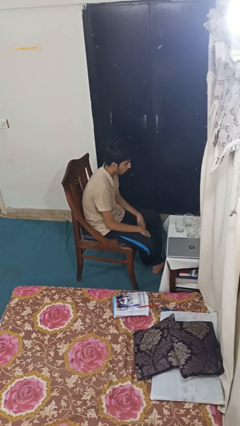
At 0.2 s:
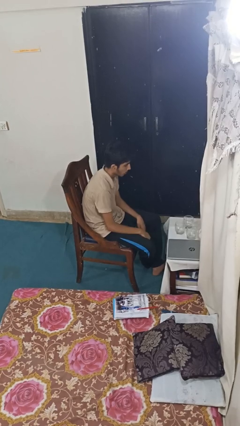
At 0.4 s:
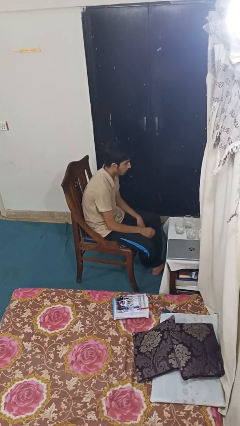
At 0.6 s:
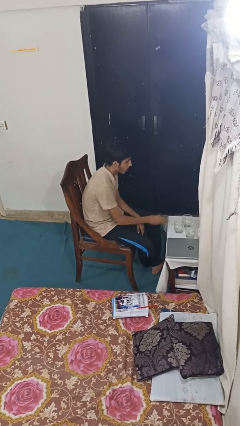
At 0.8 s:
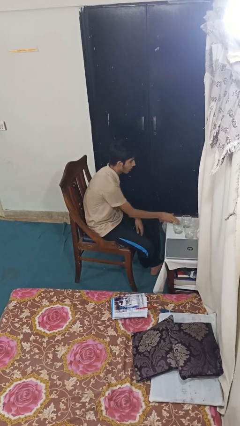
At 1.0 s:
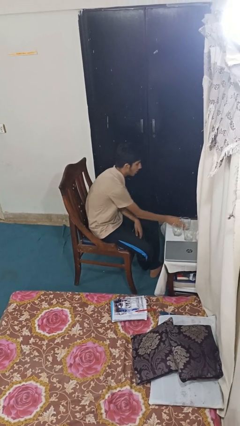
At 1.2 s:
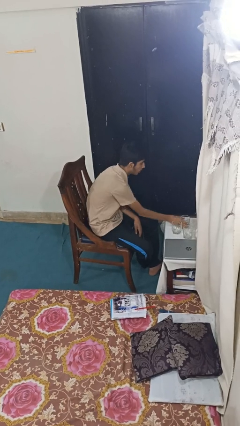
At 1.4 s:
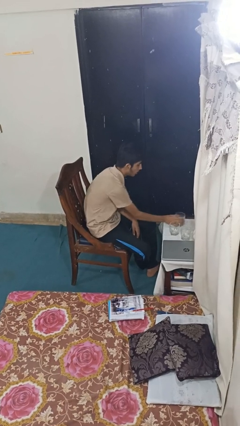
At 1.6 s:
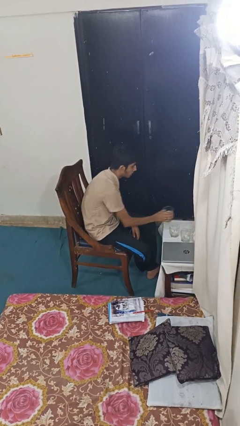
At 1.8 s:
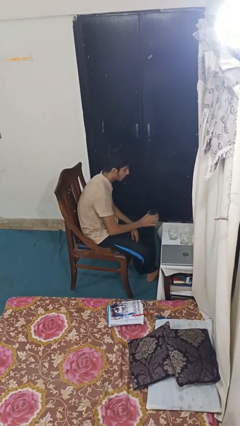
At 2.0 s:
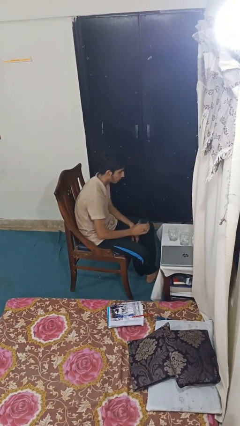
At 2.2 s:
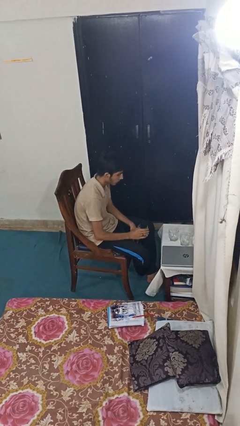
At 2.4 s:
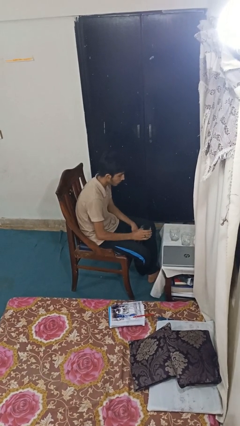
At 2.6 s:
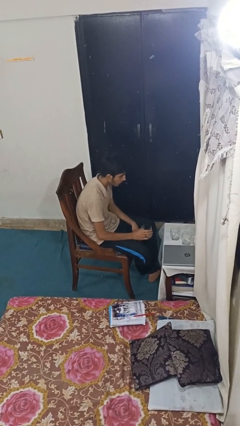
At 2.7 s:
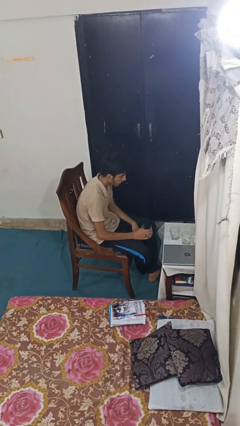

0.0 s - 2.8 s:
person picks up object from table

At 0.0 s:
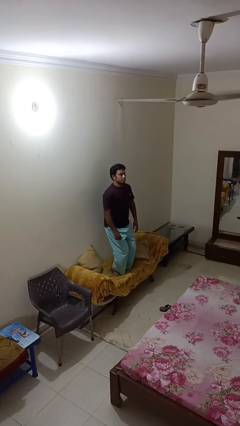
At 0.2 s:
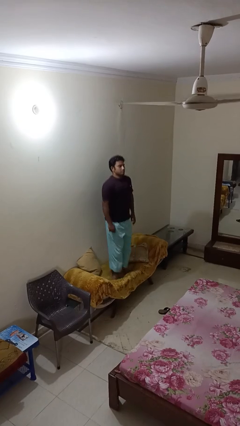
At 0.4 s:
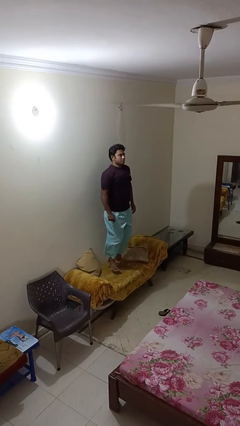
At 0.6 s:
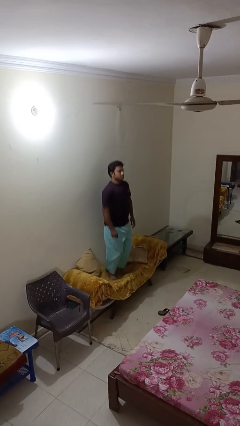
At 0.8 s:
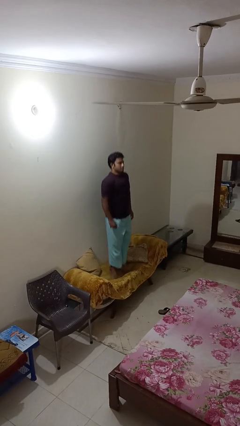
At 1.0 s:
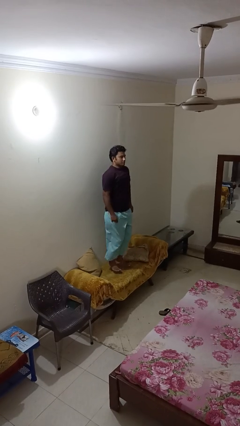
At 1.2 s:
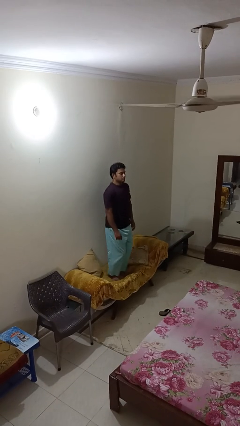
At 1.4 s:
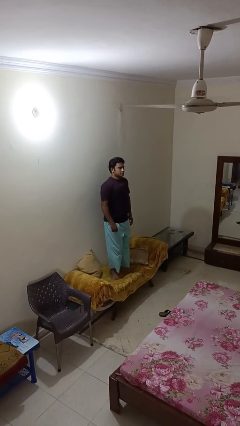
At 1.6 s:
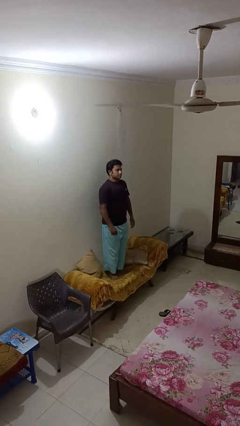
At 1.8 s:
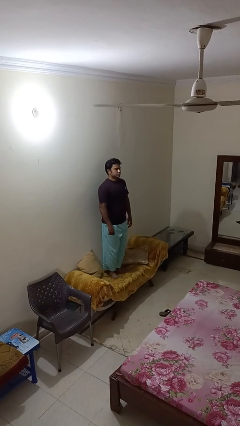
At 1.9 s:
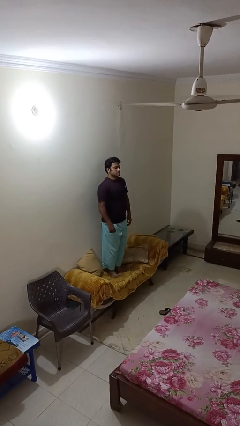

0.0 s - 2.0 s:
person jumps on couch

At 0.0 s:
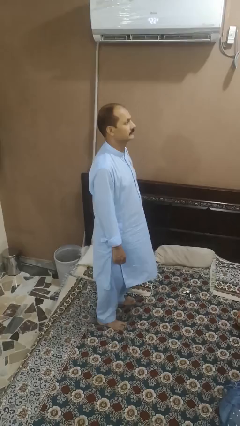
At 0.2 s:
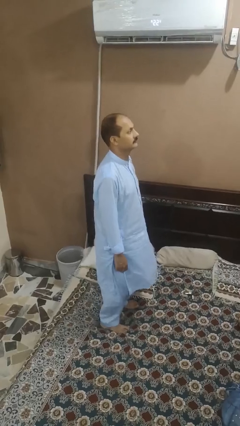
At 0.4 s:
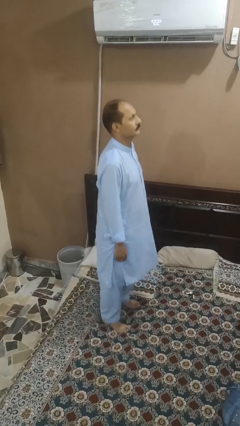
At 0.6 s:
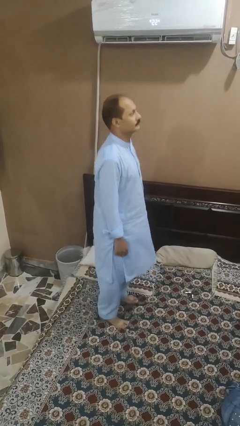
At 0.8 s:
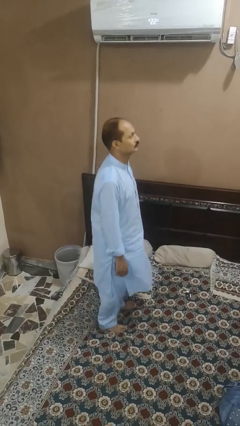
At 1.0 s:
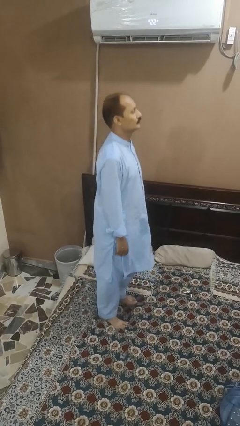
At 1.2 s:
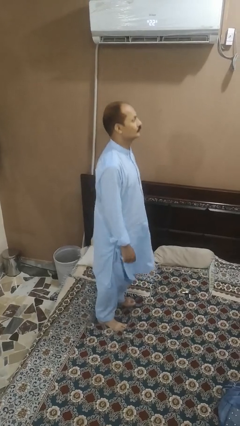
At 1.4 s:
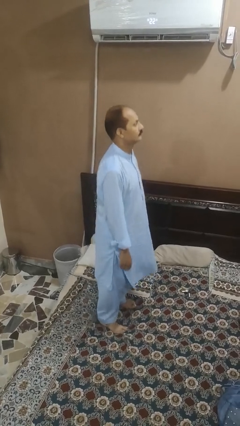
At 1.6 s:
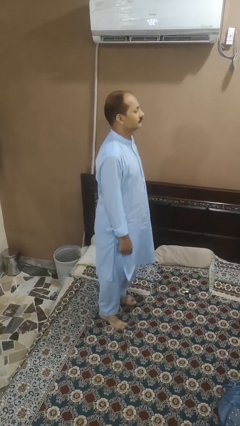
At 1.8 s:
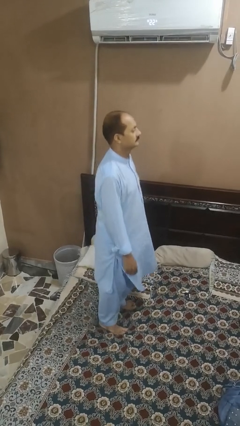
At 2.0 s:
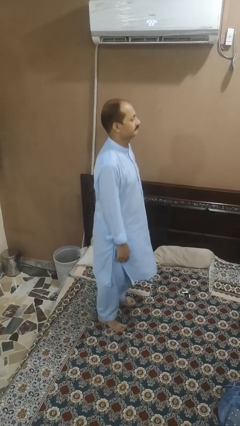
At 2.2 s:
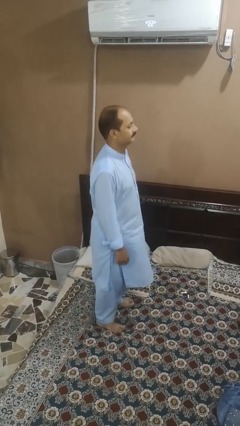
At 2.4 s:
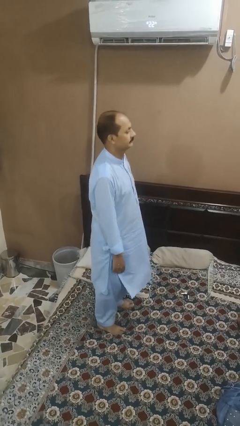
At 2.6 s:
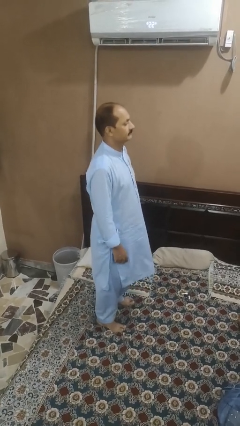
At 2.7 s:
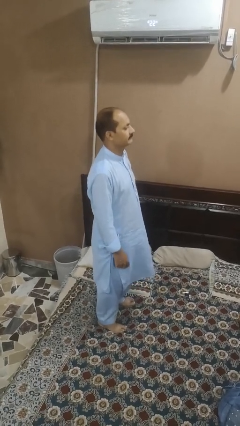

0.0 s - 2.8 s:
person jumps on bed

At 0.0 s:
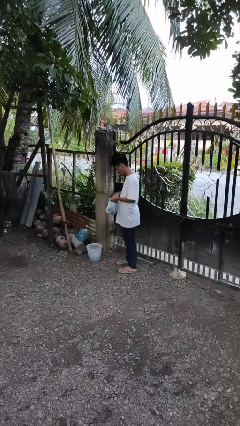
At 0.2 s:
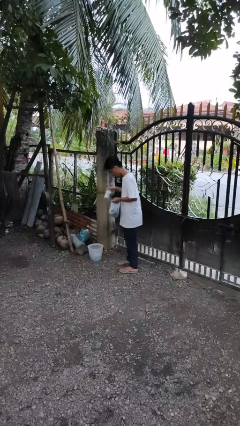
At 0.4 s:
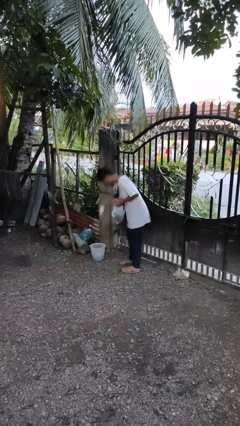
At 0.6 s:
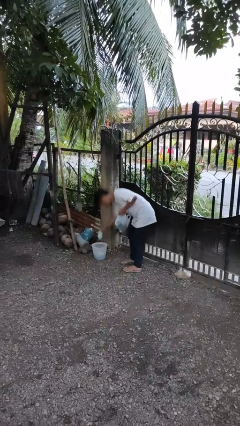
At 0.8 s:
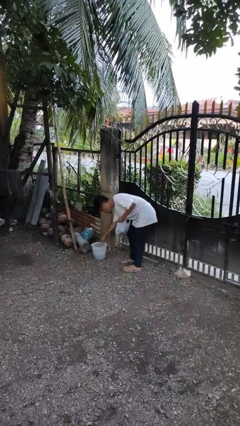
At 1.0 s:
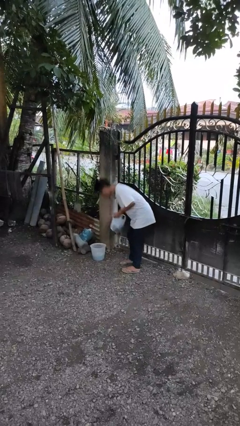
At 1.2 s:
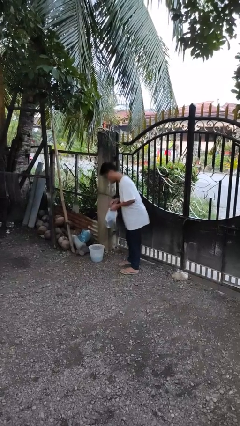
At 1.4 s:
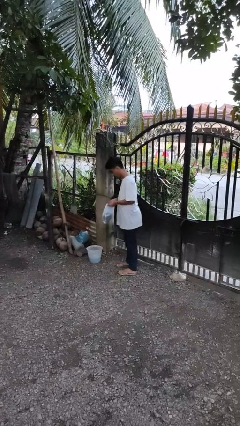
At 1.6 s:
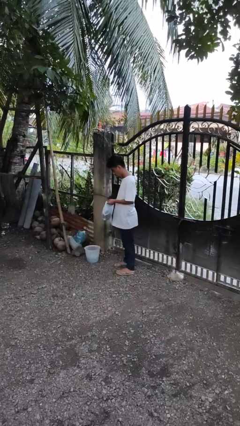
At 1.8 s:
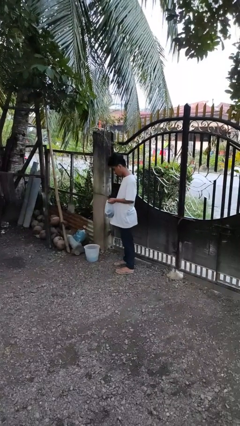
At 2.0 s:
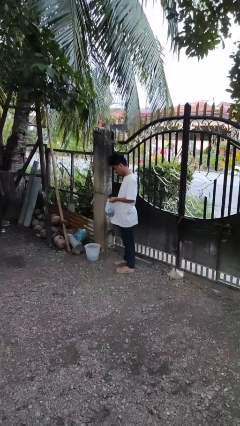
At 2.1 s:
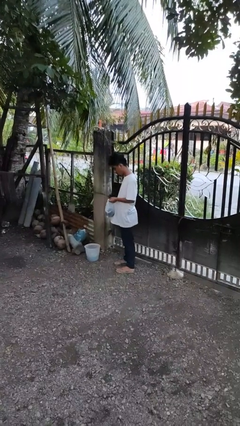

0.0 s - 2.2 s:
person discards trash

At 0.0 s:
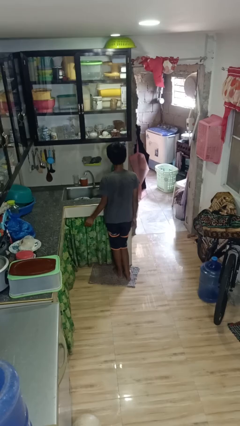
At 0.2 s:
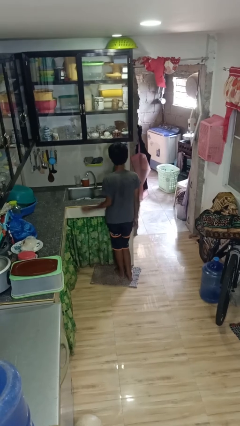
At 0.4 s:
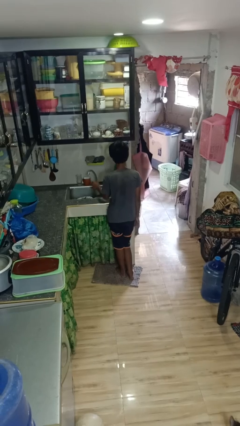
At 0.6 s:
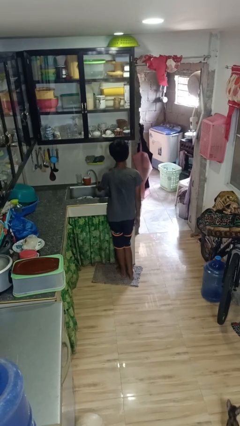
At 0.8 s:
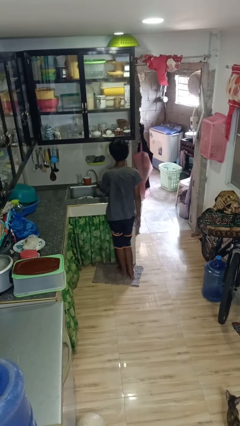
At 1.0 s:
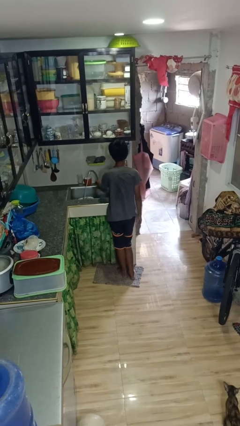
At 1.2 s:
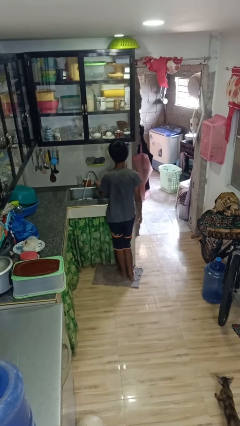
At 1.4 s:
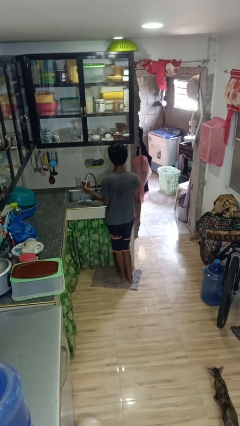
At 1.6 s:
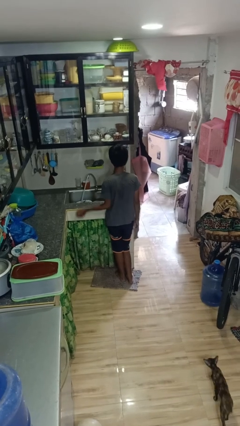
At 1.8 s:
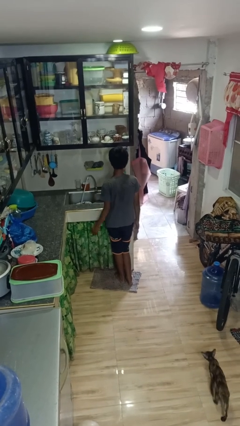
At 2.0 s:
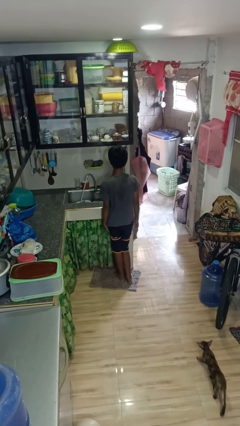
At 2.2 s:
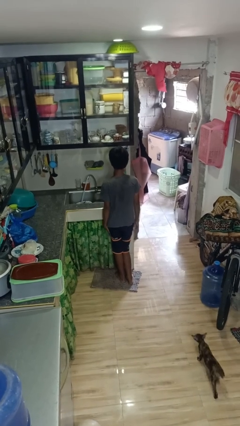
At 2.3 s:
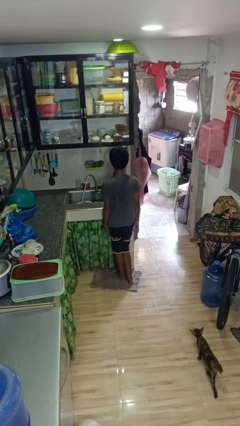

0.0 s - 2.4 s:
person turns on faucet

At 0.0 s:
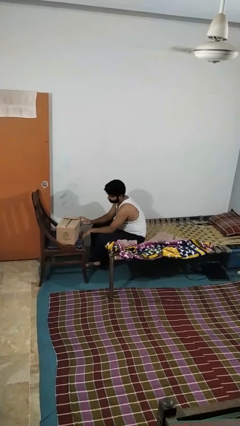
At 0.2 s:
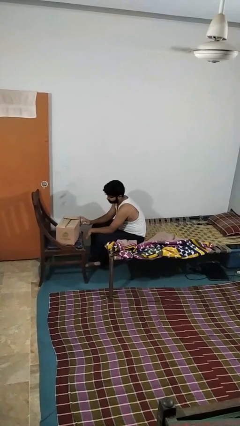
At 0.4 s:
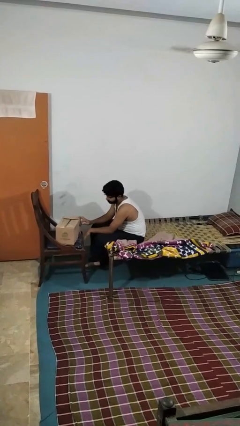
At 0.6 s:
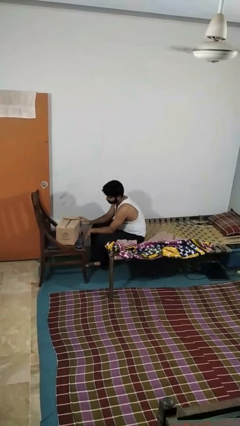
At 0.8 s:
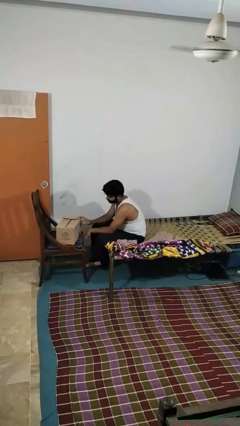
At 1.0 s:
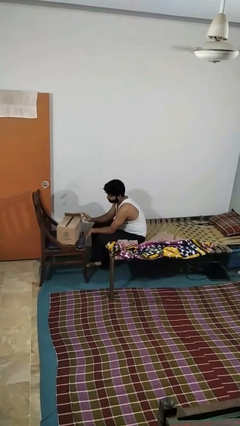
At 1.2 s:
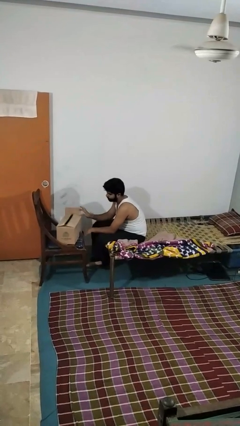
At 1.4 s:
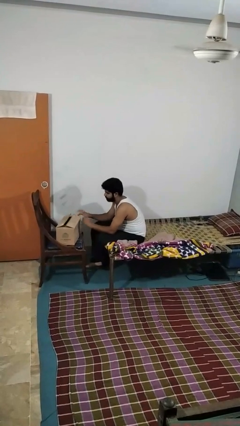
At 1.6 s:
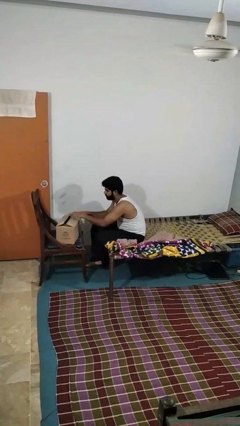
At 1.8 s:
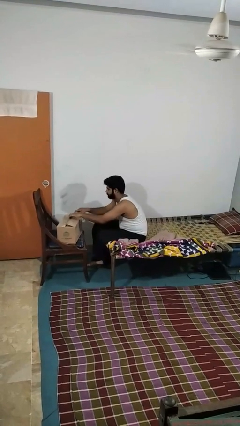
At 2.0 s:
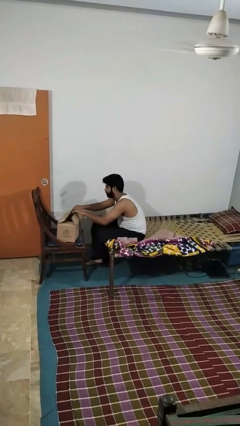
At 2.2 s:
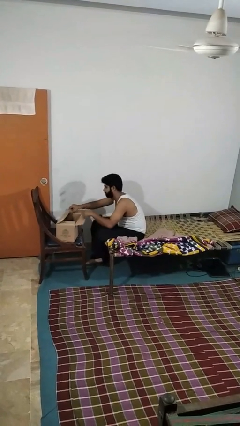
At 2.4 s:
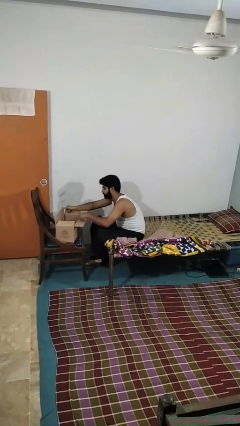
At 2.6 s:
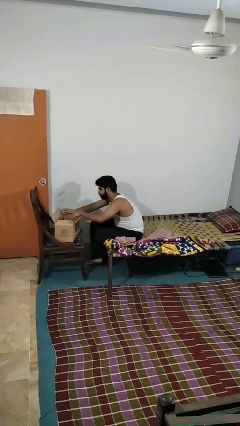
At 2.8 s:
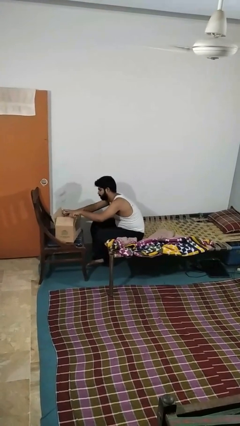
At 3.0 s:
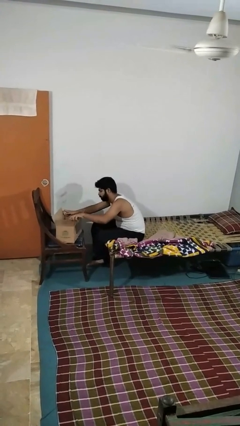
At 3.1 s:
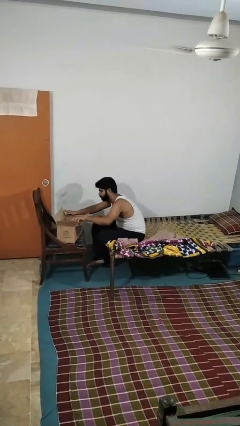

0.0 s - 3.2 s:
person opens box

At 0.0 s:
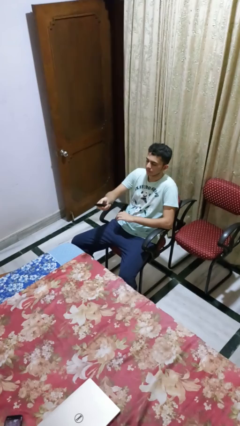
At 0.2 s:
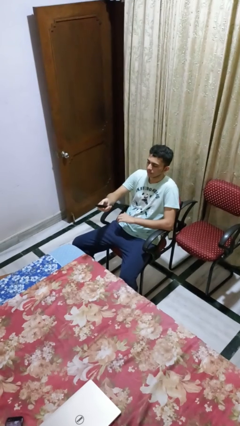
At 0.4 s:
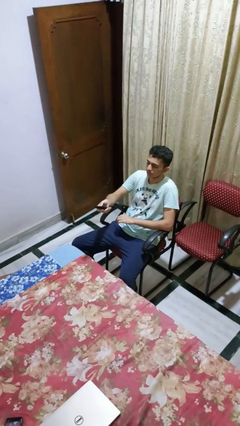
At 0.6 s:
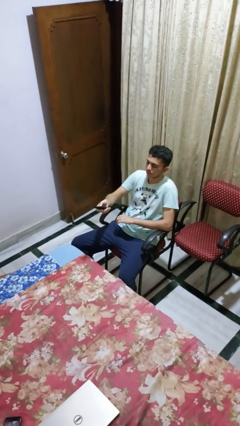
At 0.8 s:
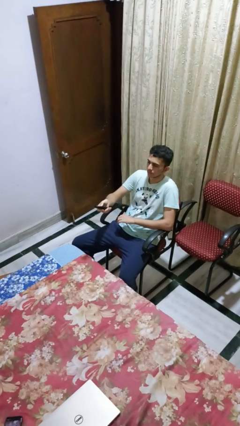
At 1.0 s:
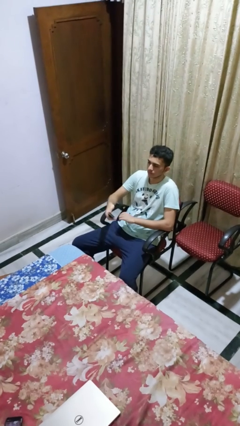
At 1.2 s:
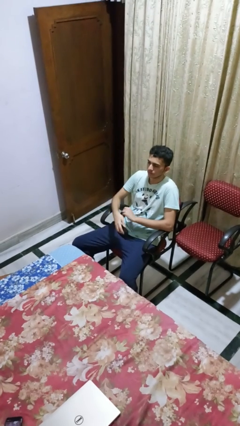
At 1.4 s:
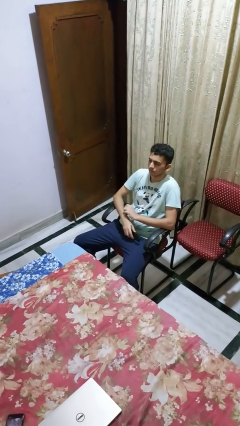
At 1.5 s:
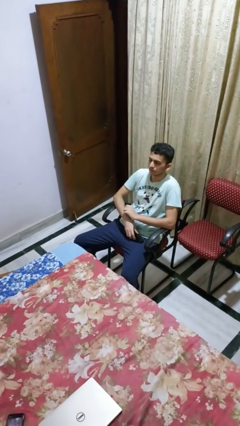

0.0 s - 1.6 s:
person uses television remote
